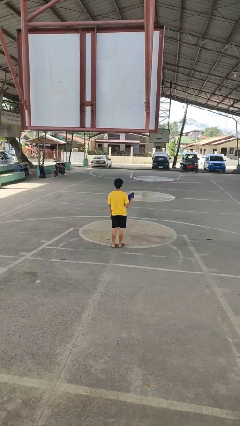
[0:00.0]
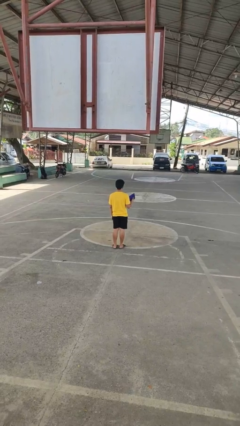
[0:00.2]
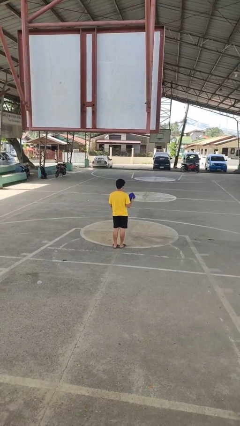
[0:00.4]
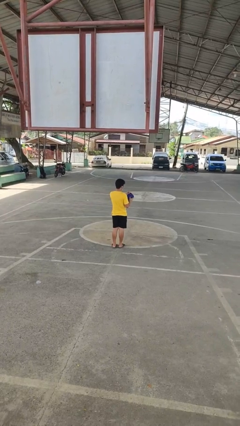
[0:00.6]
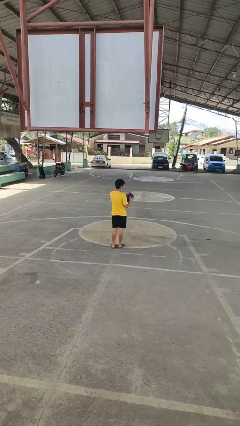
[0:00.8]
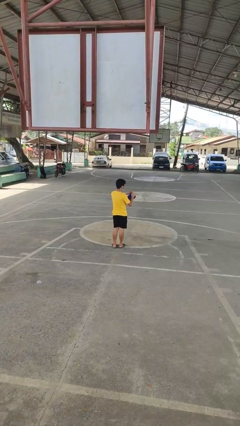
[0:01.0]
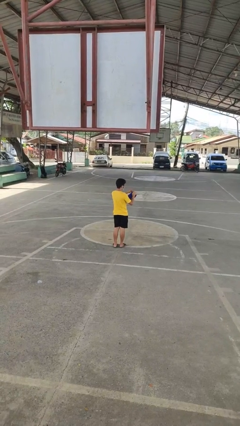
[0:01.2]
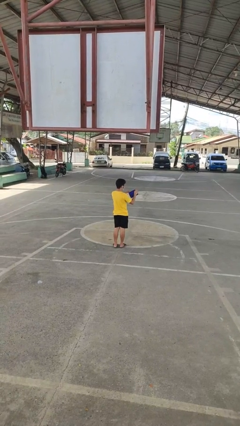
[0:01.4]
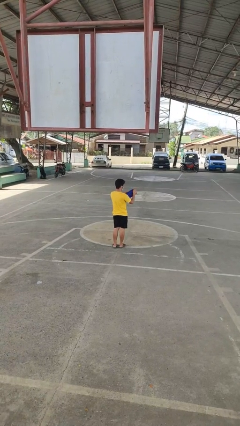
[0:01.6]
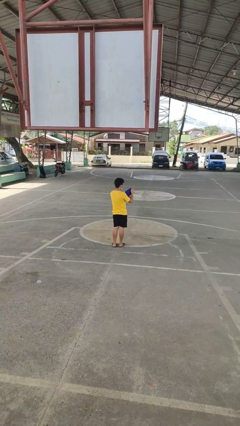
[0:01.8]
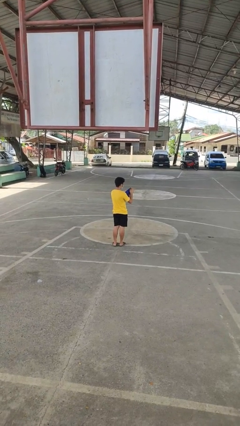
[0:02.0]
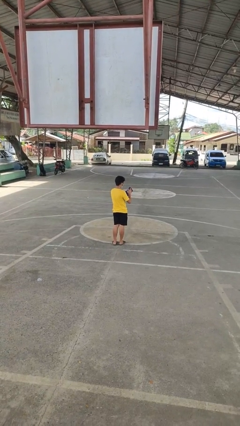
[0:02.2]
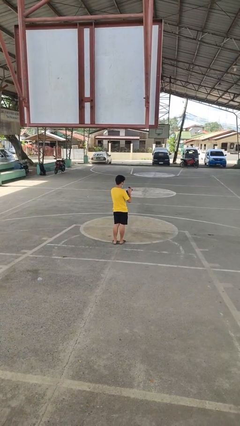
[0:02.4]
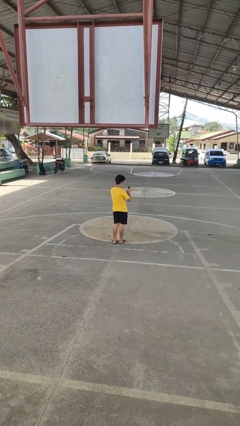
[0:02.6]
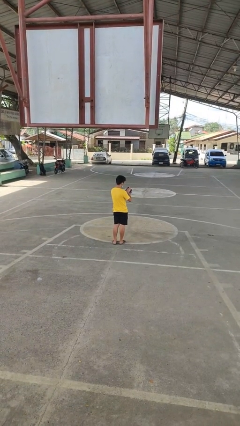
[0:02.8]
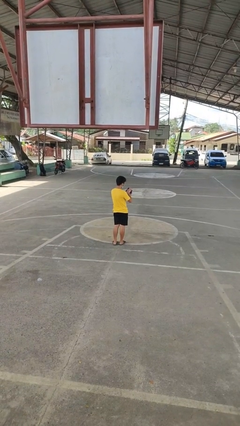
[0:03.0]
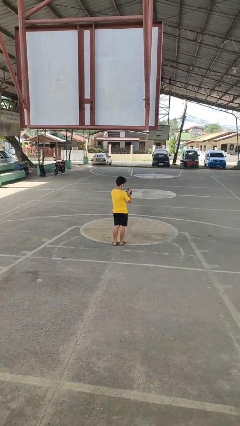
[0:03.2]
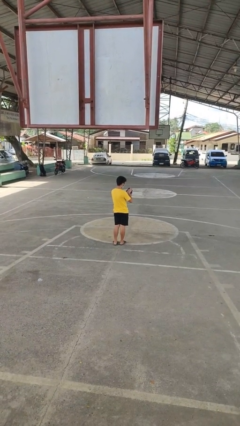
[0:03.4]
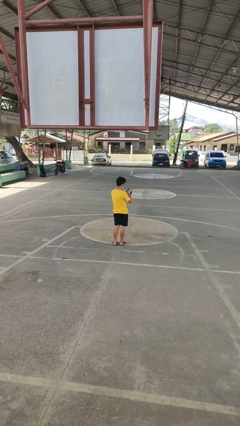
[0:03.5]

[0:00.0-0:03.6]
person searches in purse

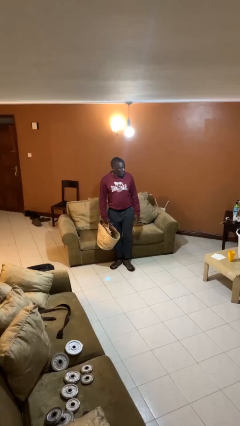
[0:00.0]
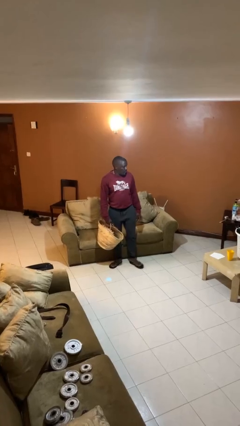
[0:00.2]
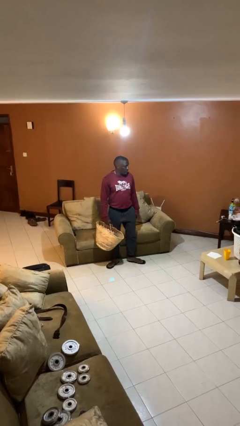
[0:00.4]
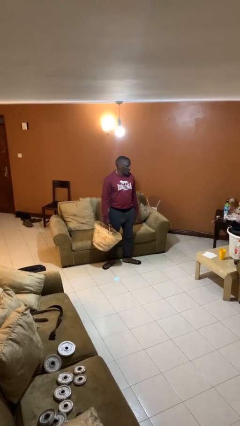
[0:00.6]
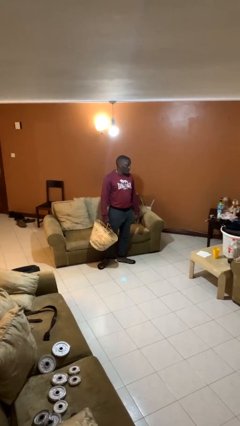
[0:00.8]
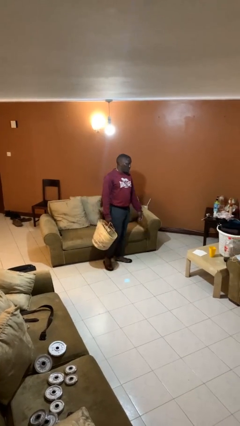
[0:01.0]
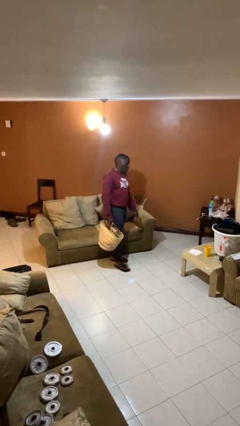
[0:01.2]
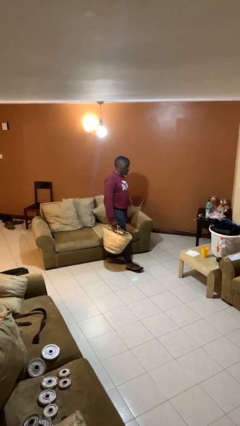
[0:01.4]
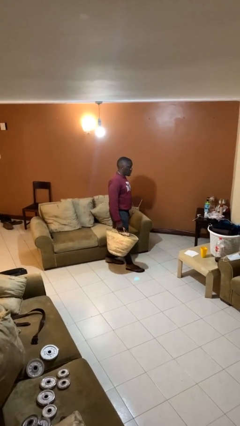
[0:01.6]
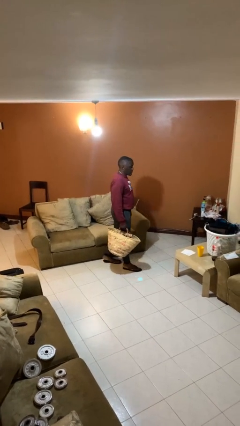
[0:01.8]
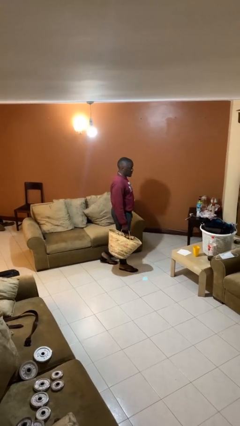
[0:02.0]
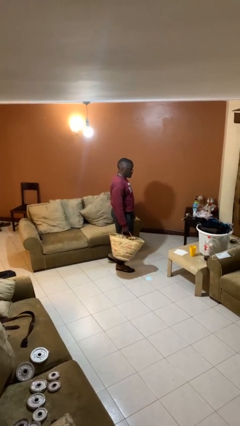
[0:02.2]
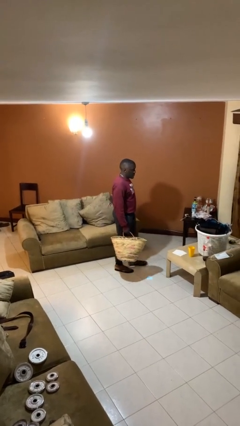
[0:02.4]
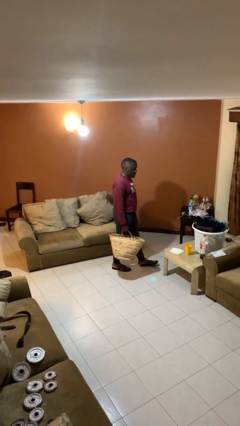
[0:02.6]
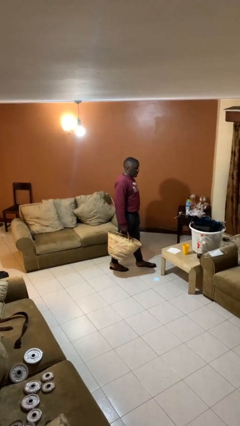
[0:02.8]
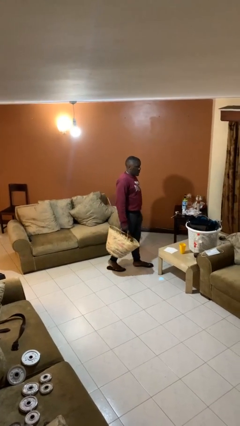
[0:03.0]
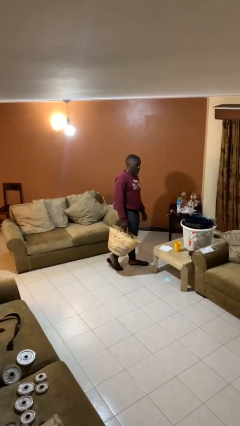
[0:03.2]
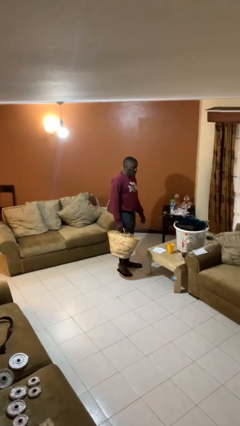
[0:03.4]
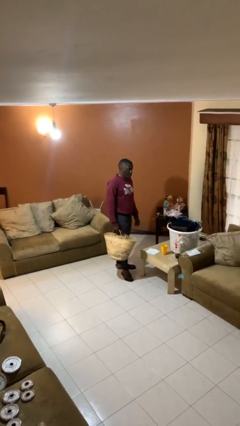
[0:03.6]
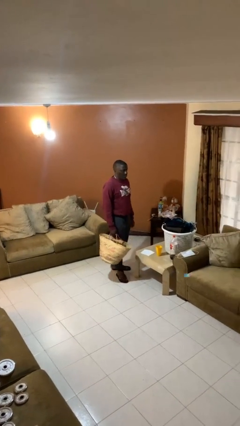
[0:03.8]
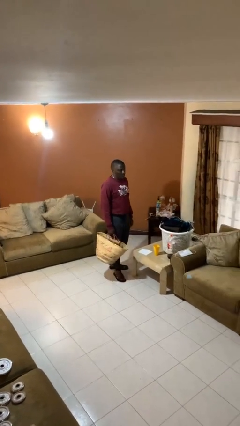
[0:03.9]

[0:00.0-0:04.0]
person carries groceries

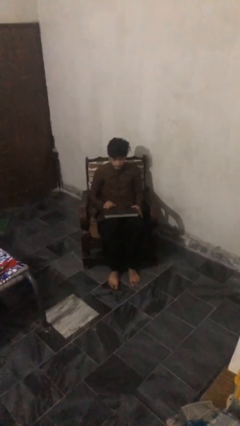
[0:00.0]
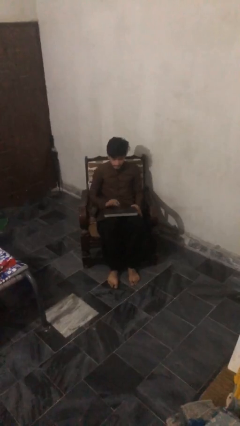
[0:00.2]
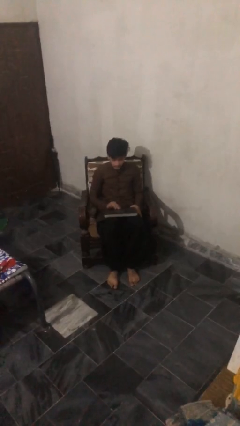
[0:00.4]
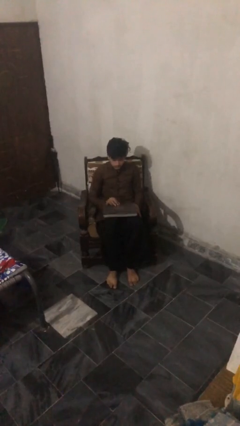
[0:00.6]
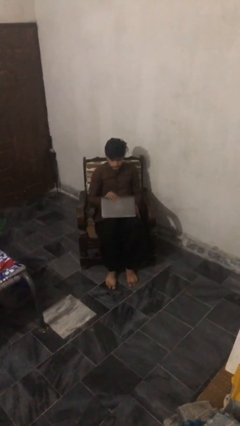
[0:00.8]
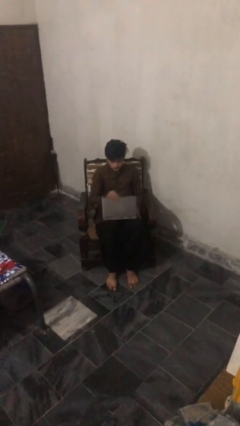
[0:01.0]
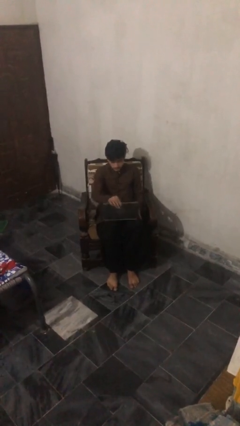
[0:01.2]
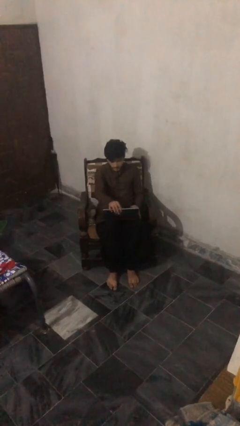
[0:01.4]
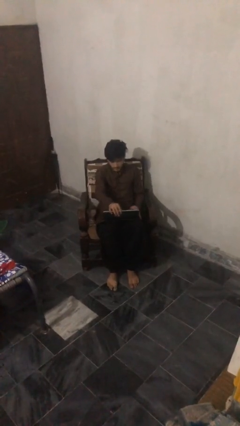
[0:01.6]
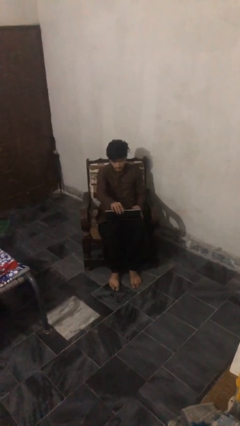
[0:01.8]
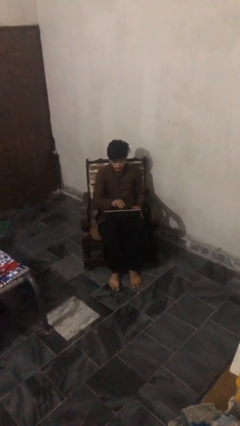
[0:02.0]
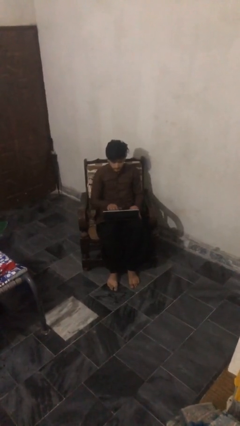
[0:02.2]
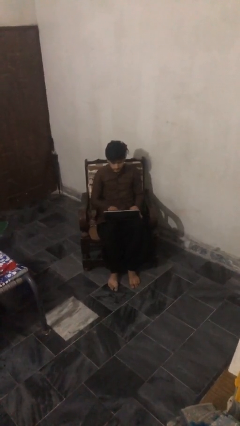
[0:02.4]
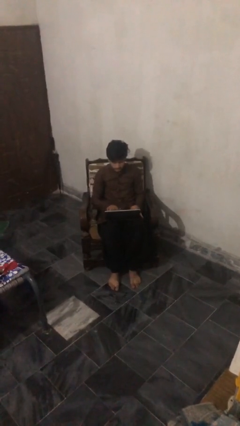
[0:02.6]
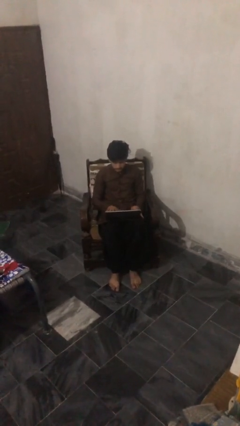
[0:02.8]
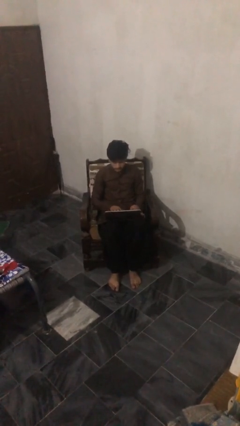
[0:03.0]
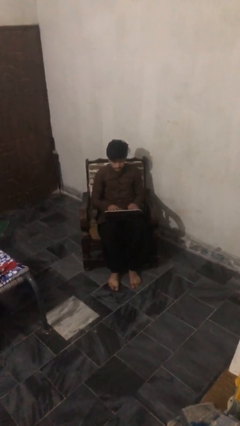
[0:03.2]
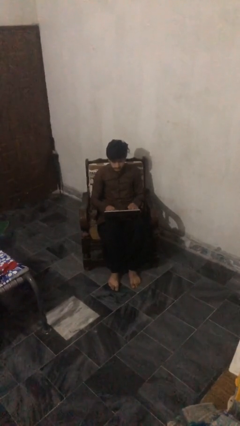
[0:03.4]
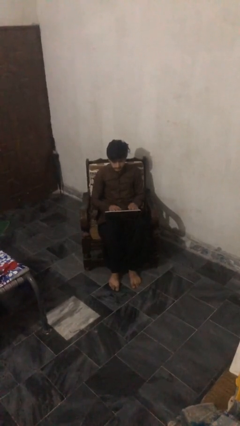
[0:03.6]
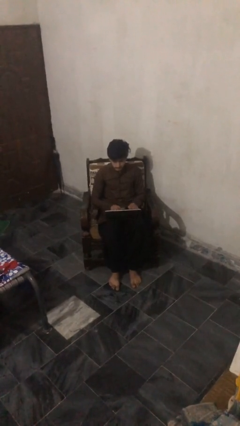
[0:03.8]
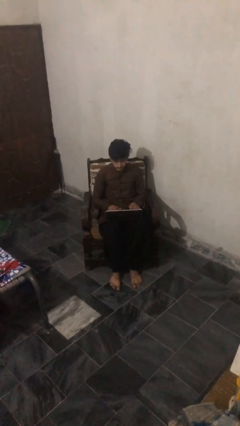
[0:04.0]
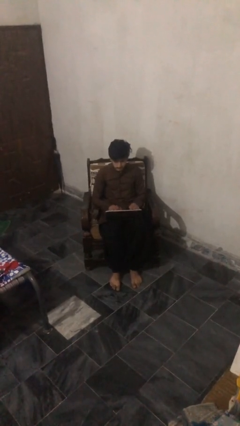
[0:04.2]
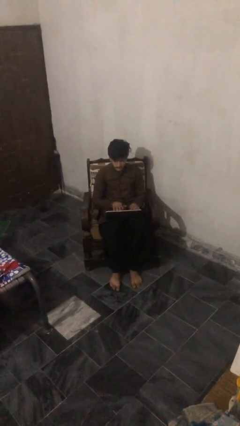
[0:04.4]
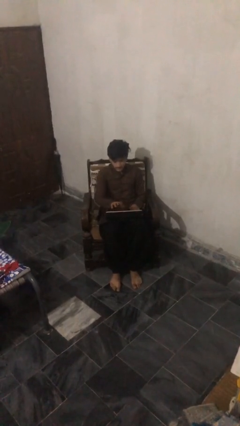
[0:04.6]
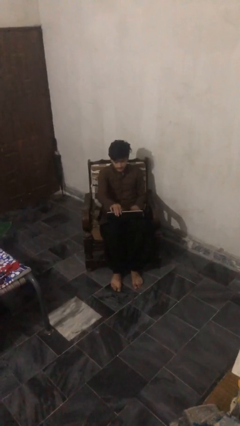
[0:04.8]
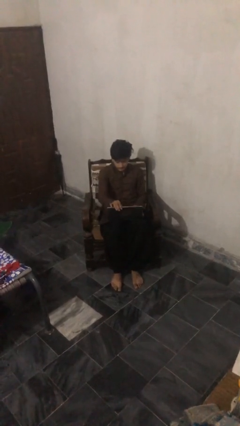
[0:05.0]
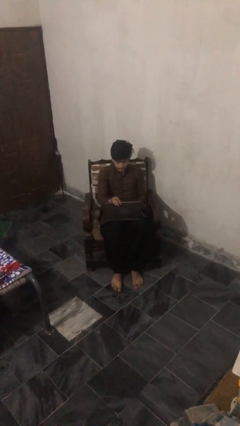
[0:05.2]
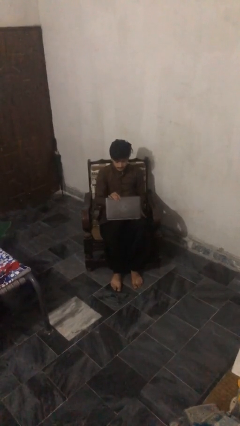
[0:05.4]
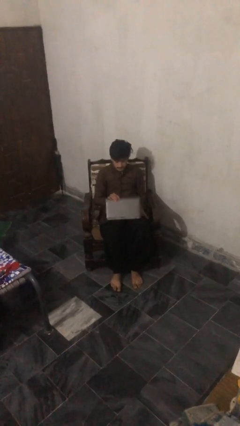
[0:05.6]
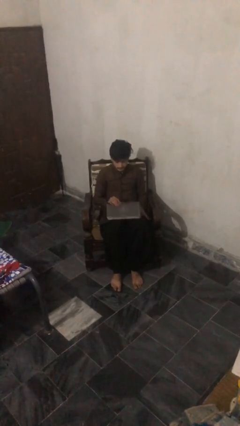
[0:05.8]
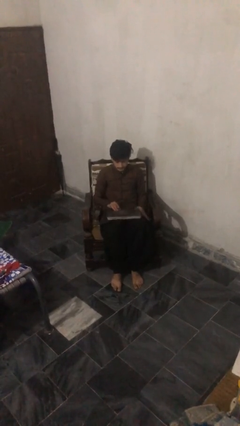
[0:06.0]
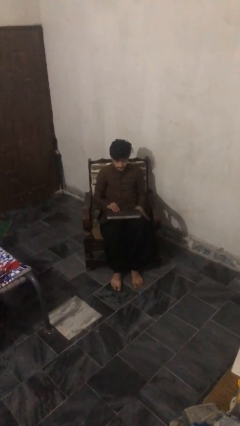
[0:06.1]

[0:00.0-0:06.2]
person interacts with laptop

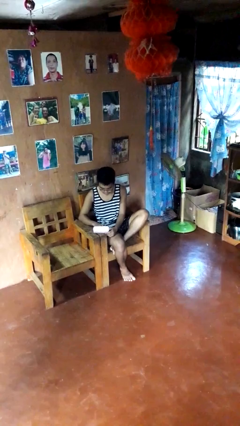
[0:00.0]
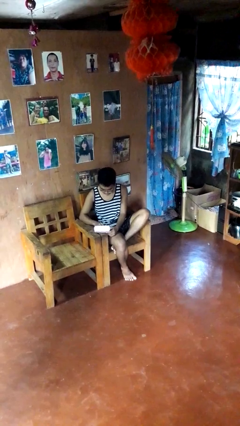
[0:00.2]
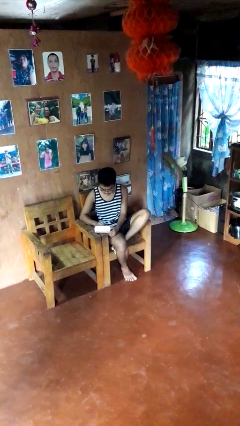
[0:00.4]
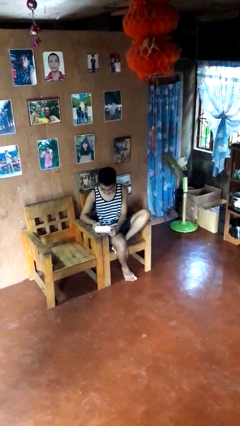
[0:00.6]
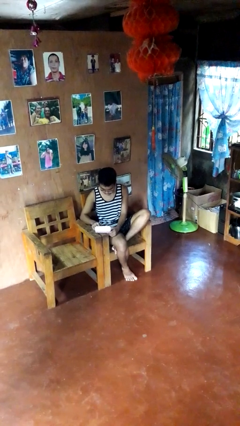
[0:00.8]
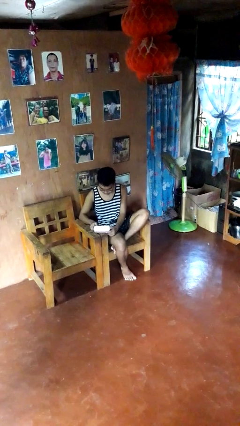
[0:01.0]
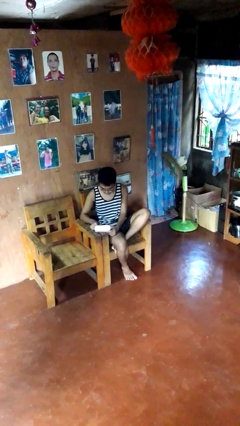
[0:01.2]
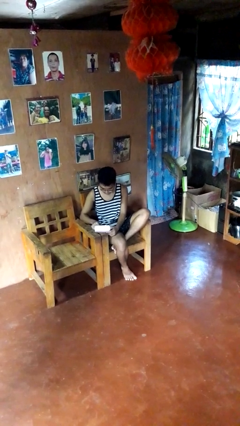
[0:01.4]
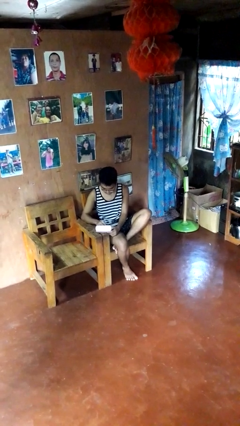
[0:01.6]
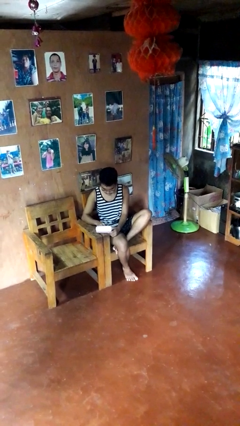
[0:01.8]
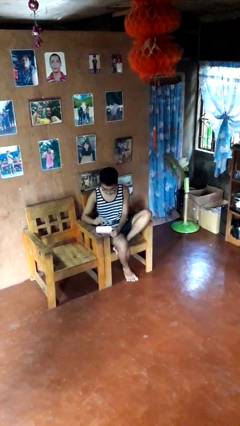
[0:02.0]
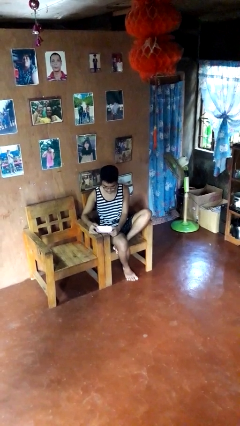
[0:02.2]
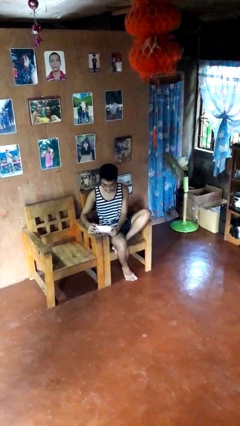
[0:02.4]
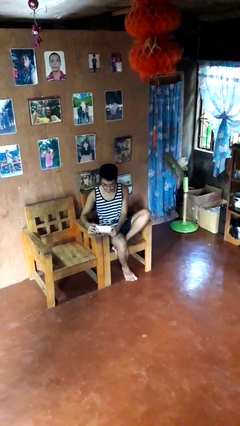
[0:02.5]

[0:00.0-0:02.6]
person searches jewelry box

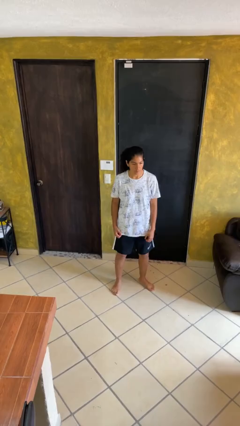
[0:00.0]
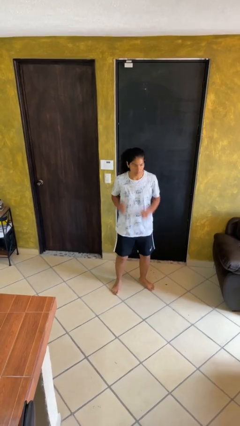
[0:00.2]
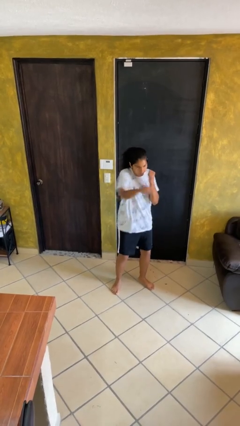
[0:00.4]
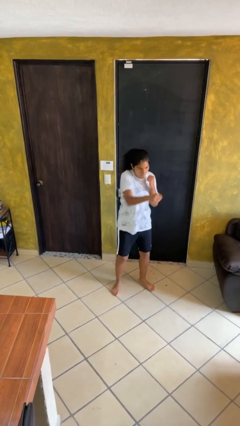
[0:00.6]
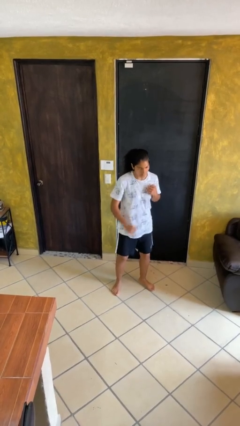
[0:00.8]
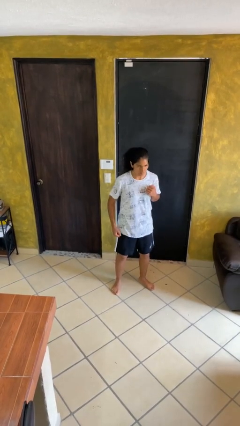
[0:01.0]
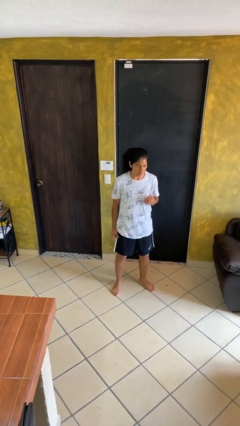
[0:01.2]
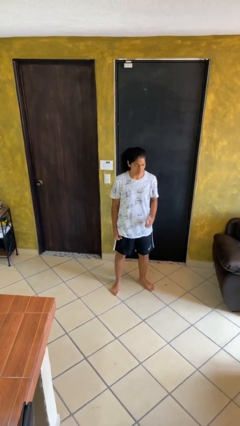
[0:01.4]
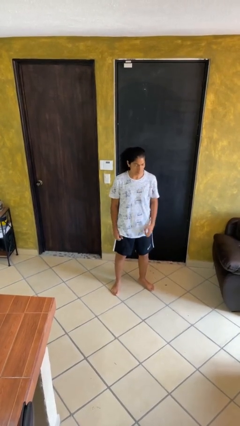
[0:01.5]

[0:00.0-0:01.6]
person punches
